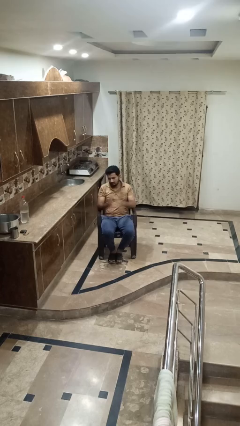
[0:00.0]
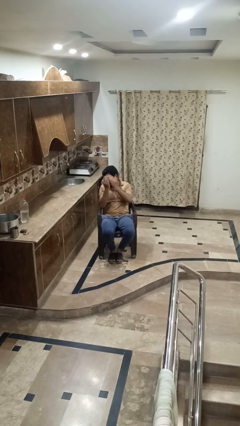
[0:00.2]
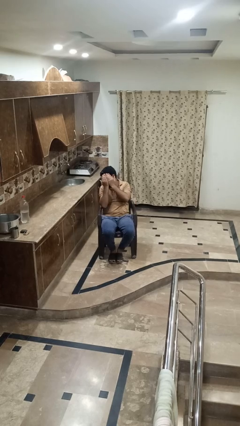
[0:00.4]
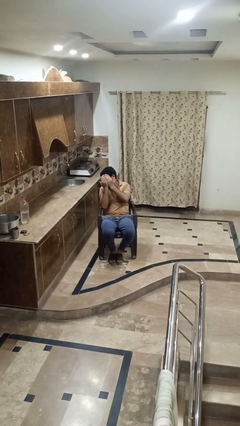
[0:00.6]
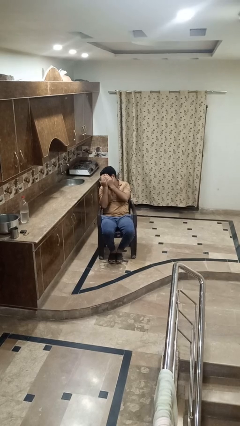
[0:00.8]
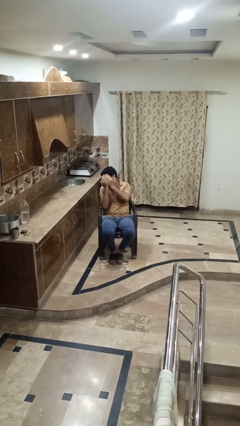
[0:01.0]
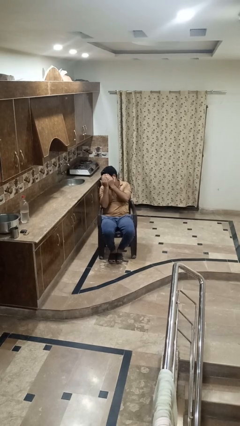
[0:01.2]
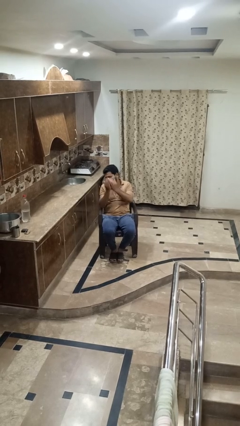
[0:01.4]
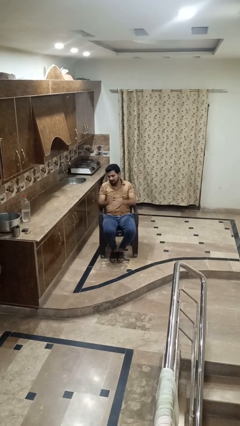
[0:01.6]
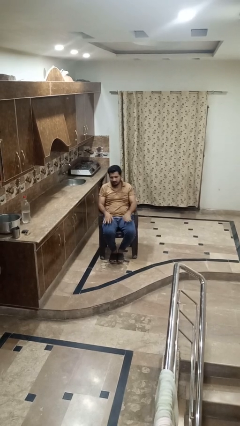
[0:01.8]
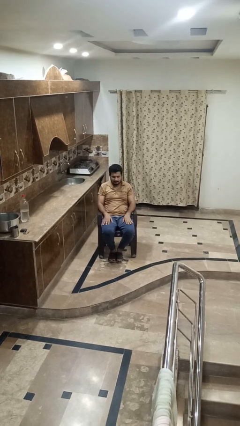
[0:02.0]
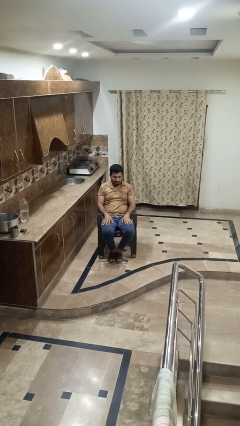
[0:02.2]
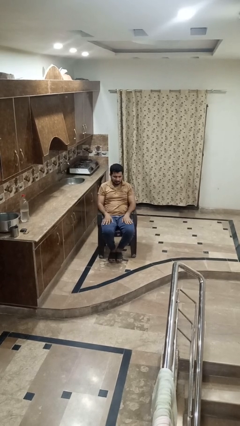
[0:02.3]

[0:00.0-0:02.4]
person covers face with hands

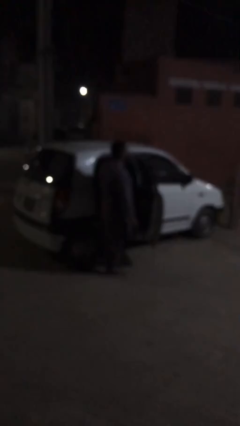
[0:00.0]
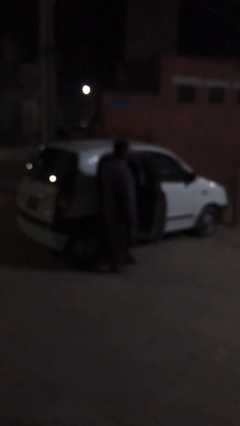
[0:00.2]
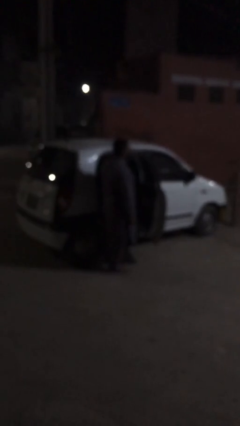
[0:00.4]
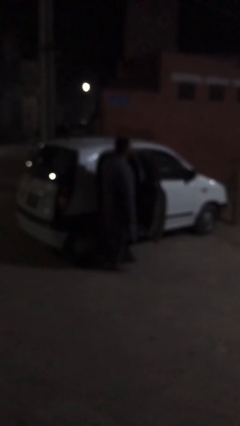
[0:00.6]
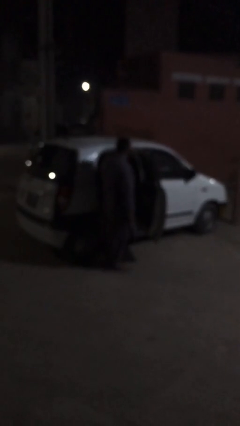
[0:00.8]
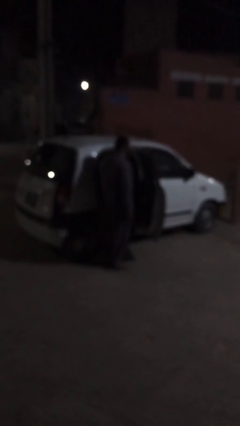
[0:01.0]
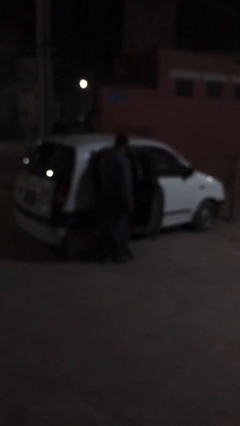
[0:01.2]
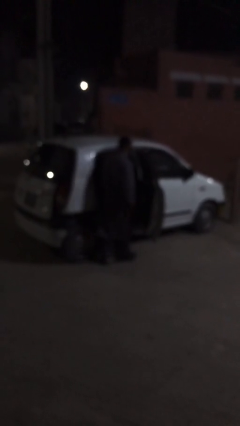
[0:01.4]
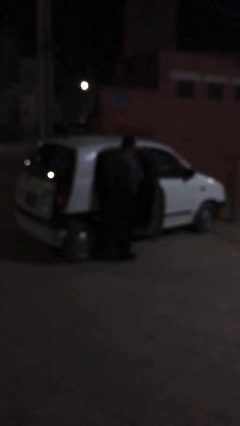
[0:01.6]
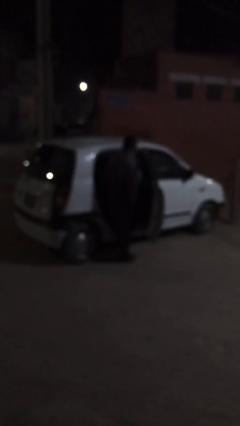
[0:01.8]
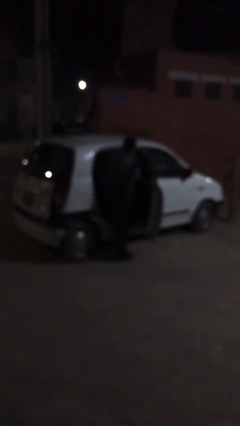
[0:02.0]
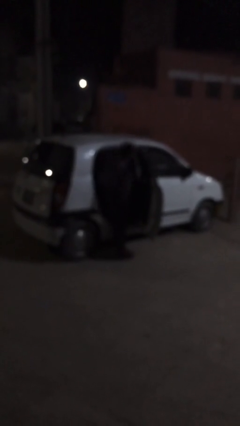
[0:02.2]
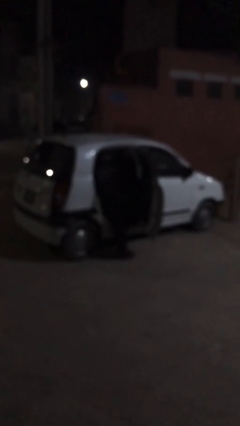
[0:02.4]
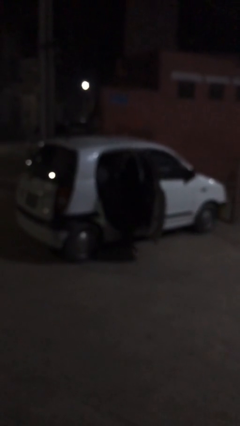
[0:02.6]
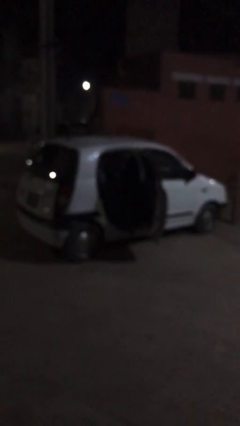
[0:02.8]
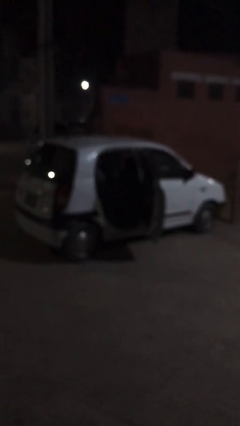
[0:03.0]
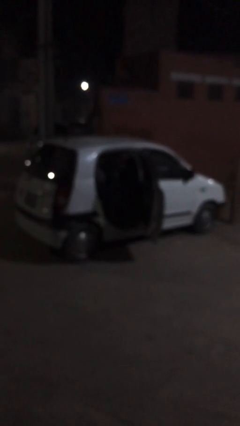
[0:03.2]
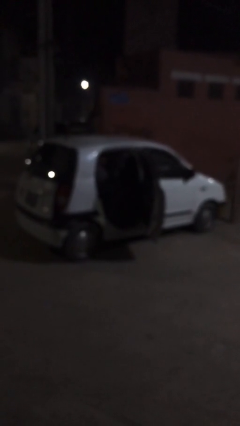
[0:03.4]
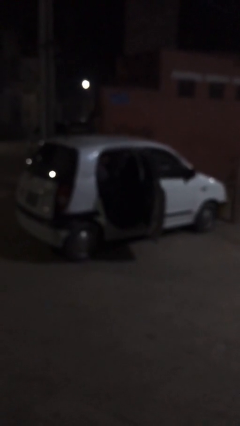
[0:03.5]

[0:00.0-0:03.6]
person enters car

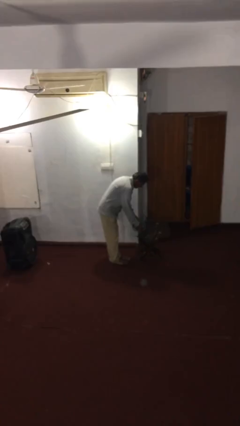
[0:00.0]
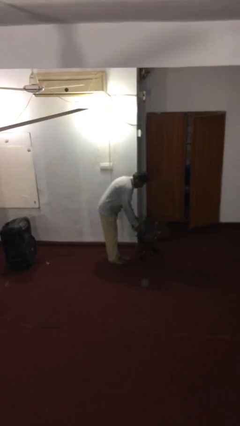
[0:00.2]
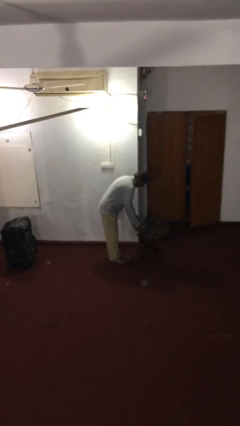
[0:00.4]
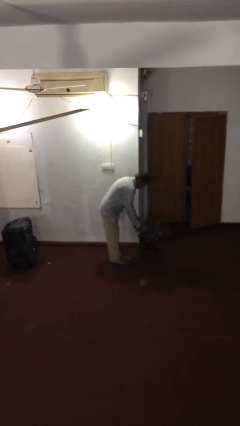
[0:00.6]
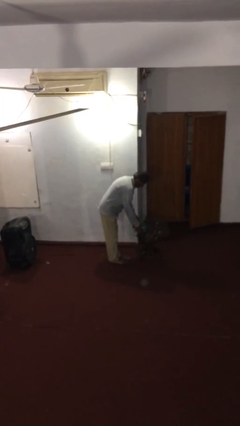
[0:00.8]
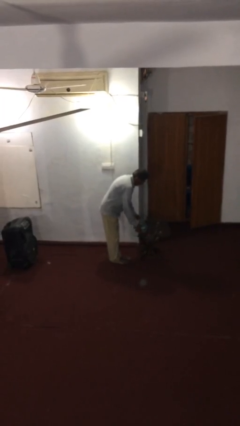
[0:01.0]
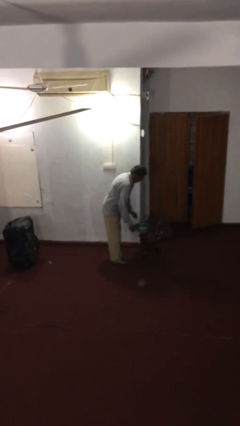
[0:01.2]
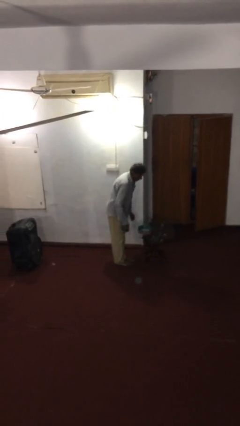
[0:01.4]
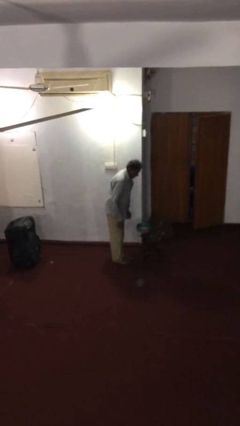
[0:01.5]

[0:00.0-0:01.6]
person puts down object on table

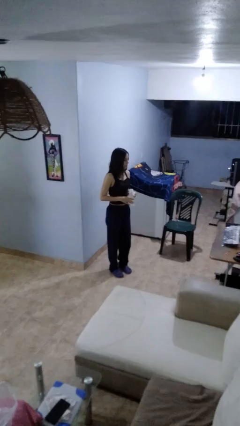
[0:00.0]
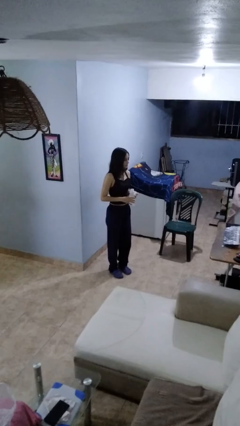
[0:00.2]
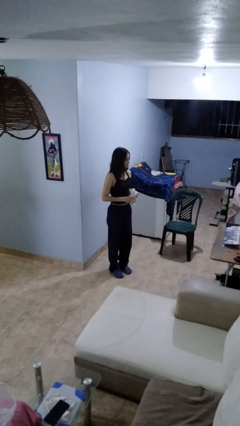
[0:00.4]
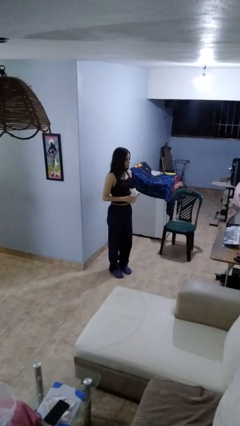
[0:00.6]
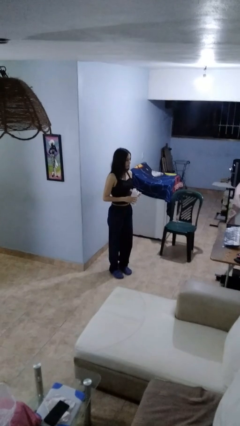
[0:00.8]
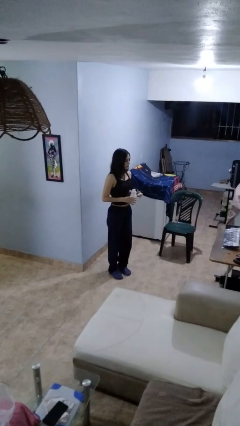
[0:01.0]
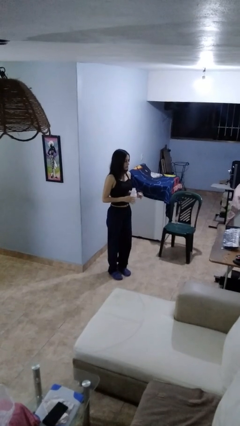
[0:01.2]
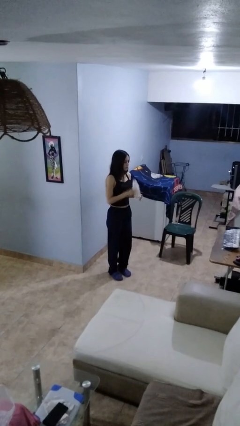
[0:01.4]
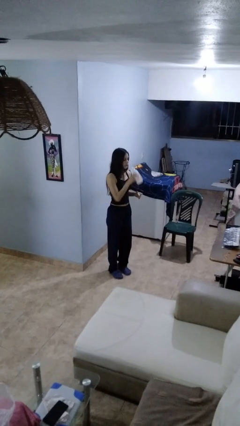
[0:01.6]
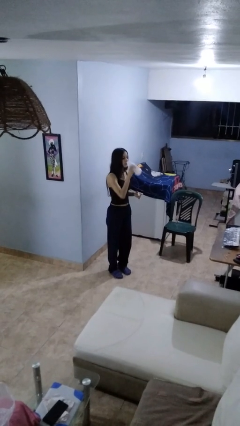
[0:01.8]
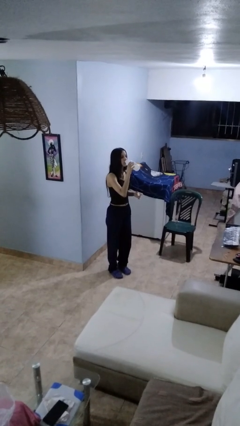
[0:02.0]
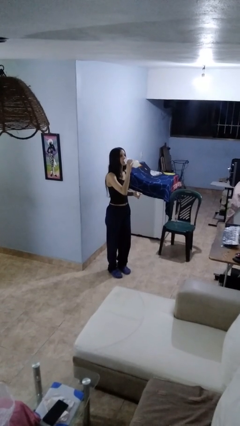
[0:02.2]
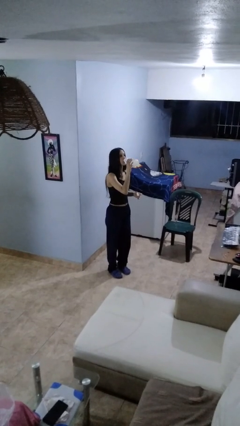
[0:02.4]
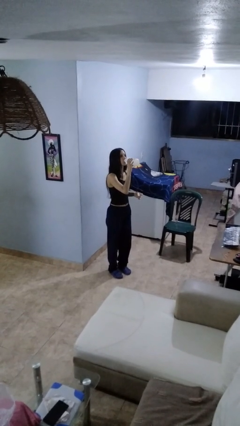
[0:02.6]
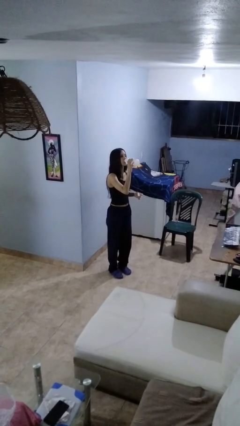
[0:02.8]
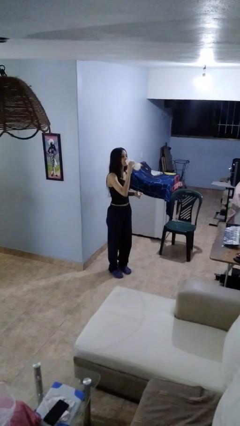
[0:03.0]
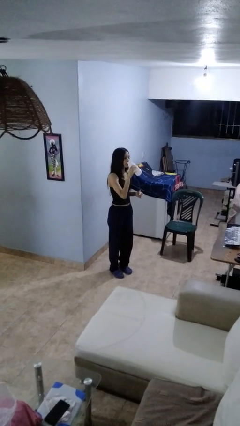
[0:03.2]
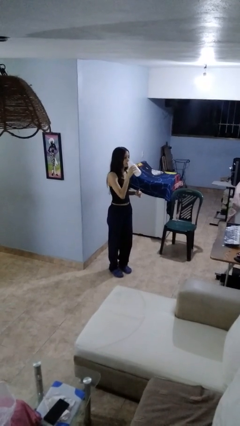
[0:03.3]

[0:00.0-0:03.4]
person drinks from bottle

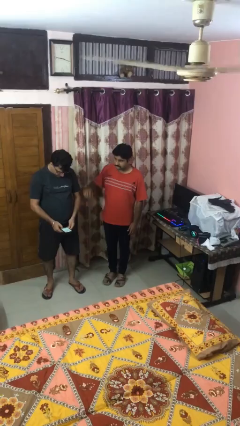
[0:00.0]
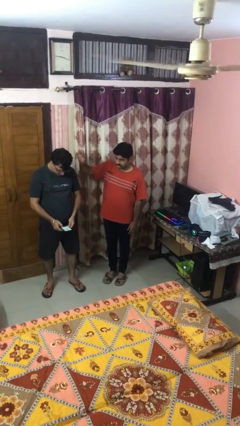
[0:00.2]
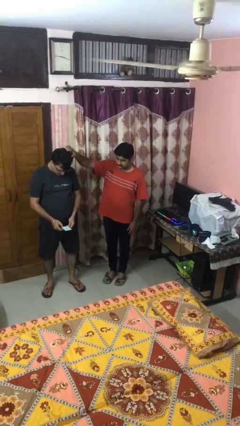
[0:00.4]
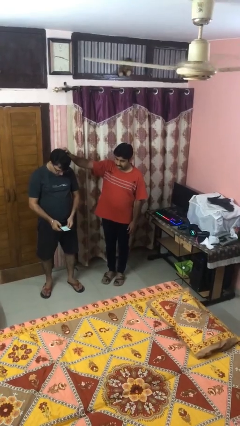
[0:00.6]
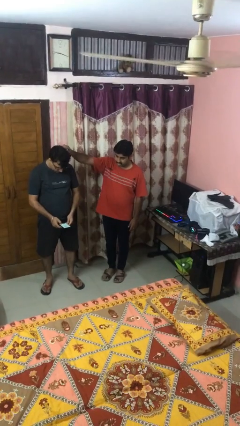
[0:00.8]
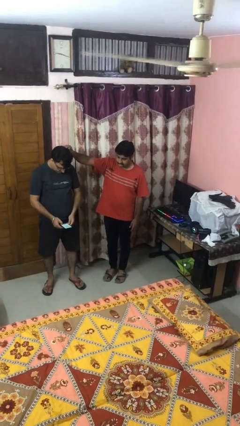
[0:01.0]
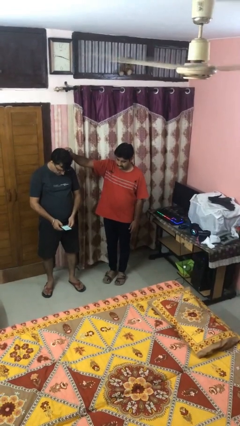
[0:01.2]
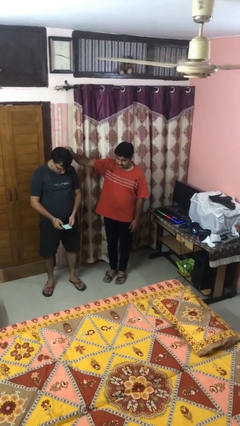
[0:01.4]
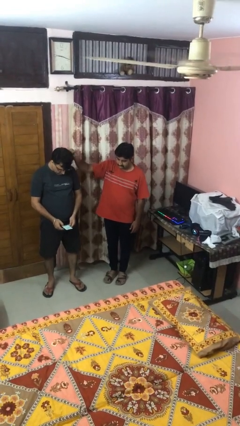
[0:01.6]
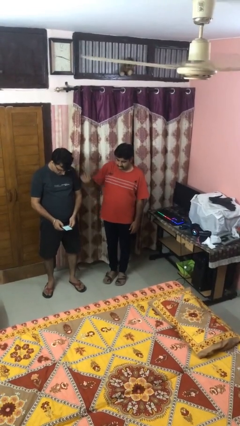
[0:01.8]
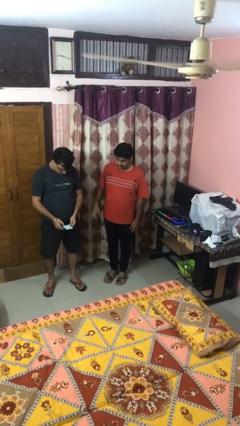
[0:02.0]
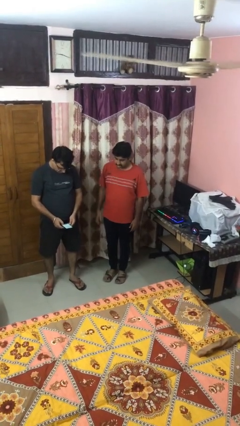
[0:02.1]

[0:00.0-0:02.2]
person grabs person by hair

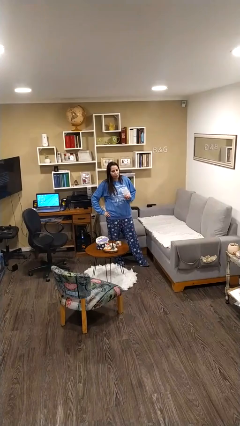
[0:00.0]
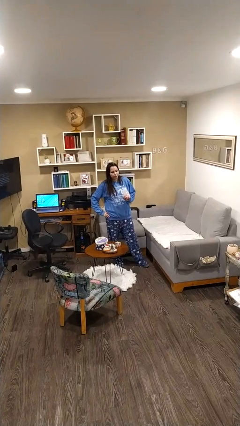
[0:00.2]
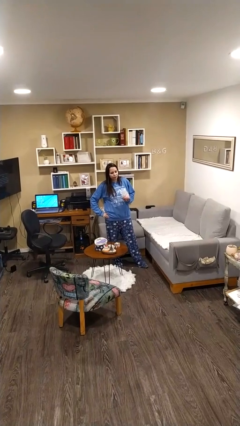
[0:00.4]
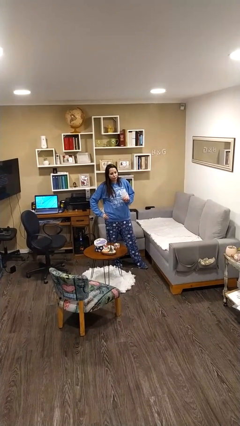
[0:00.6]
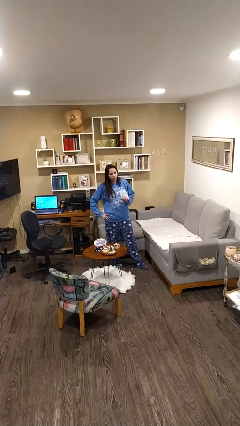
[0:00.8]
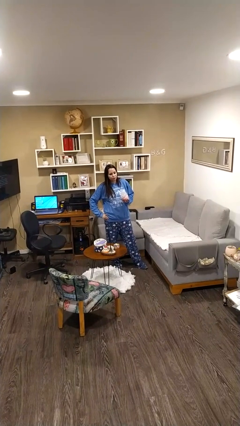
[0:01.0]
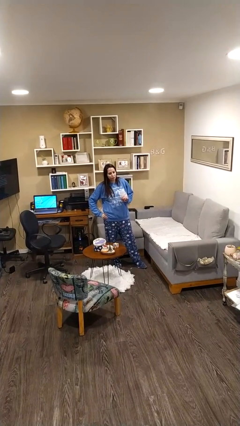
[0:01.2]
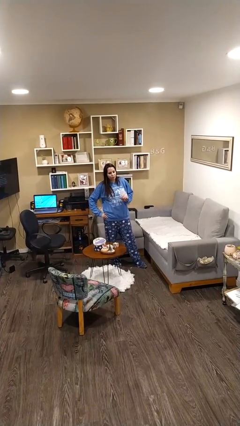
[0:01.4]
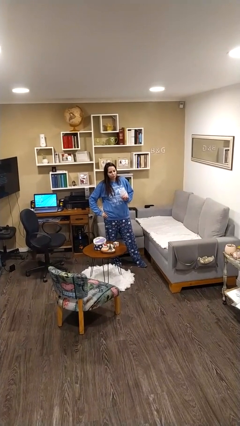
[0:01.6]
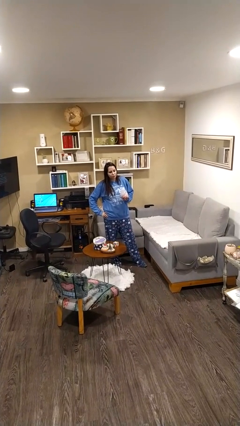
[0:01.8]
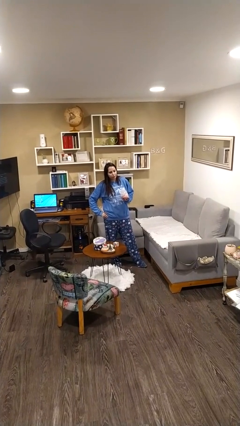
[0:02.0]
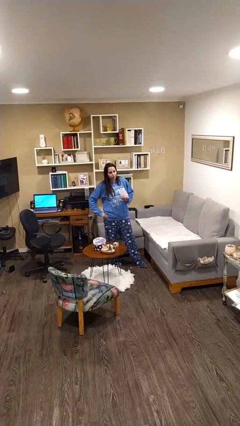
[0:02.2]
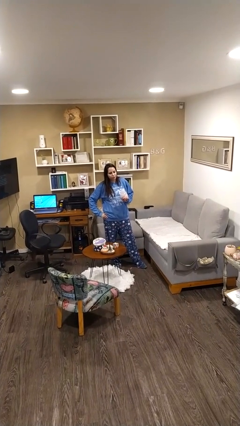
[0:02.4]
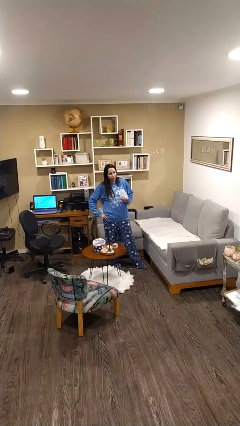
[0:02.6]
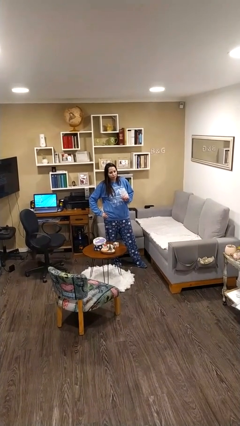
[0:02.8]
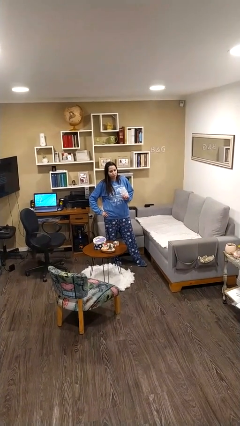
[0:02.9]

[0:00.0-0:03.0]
person eats snack from bag

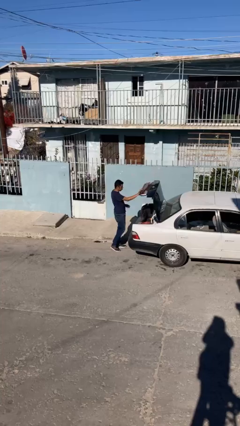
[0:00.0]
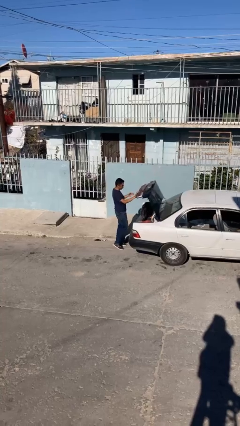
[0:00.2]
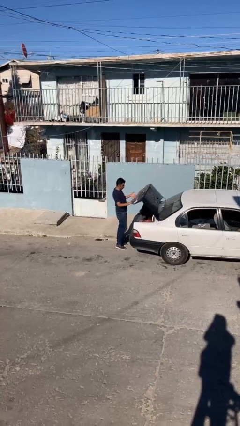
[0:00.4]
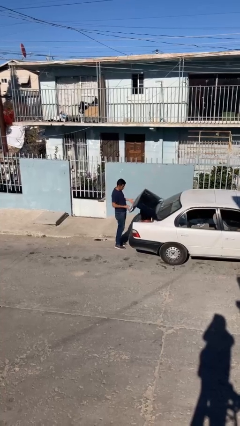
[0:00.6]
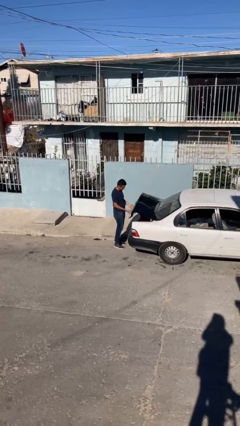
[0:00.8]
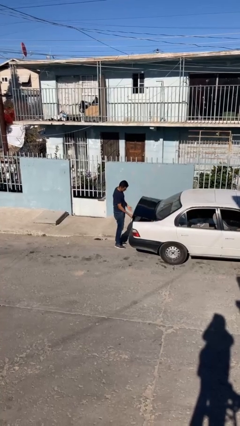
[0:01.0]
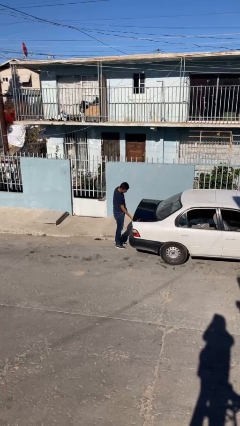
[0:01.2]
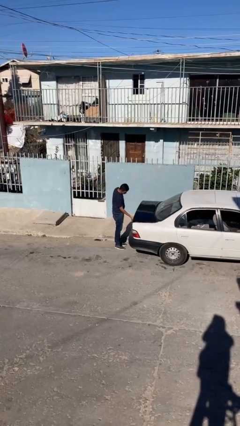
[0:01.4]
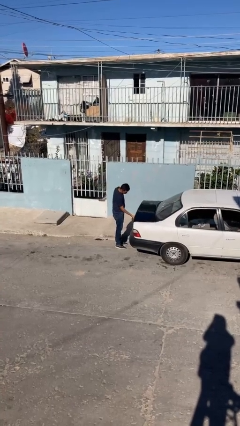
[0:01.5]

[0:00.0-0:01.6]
person exits car
